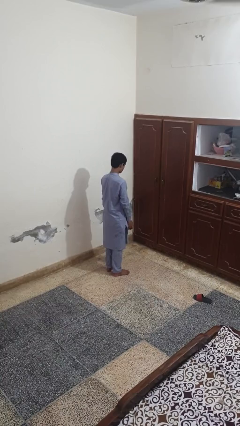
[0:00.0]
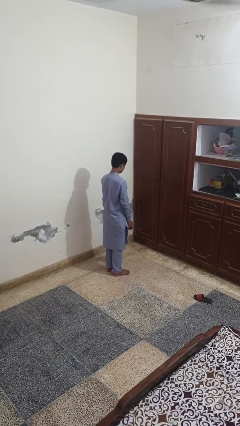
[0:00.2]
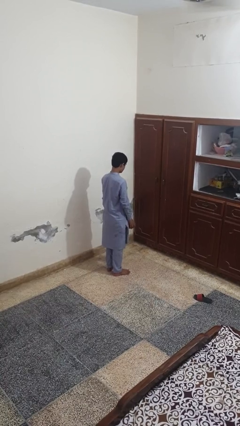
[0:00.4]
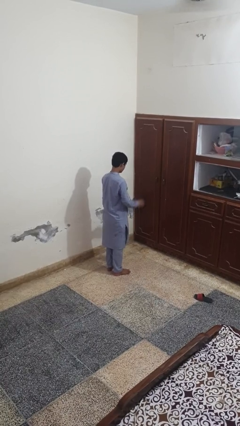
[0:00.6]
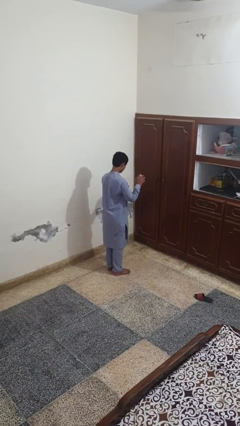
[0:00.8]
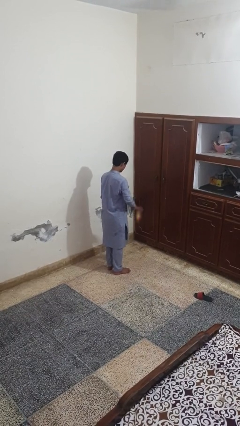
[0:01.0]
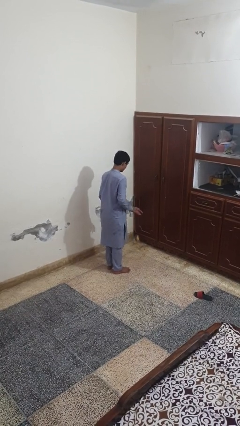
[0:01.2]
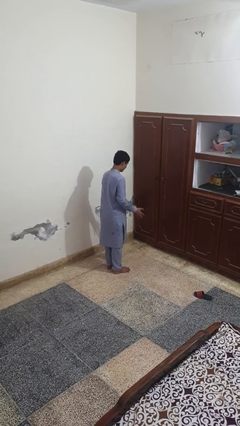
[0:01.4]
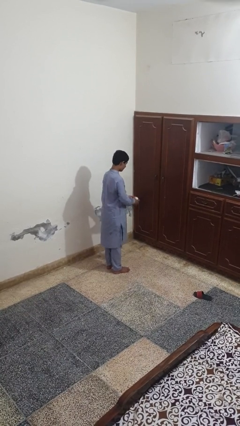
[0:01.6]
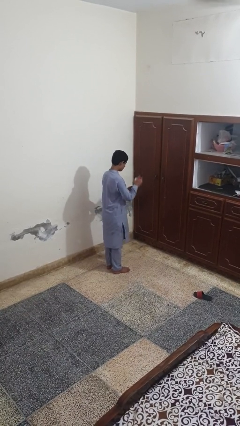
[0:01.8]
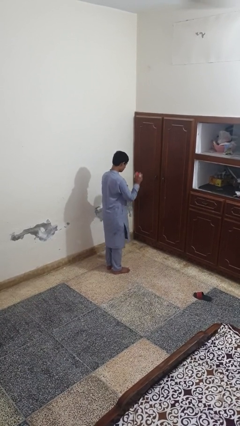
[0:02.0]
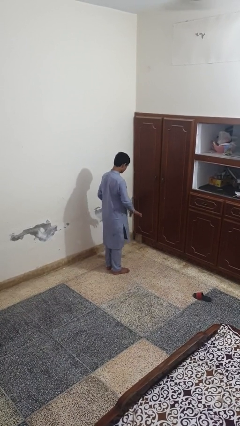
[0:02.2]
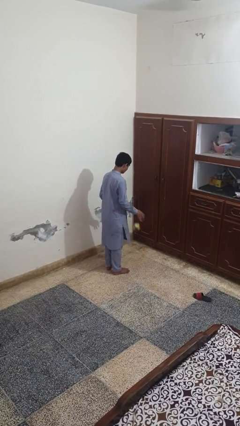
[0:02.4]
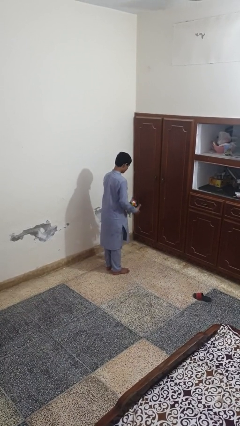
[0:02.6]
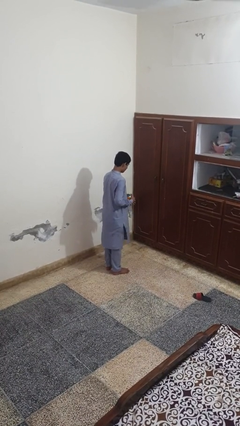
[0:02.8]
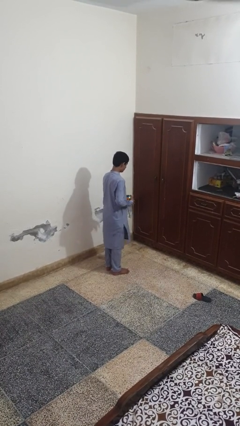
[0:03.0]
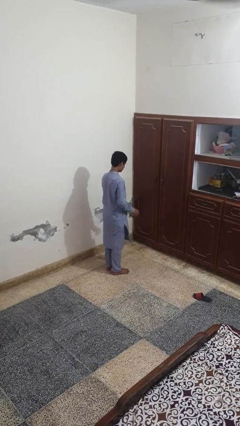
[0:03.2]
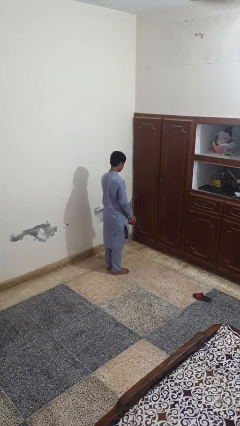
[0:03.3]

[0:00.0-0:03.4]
person bounces ball on floor

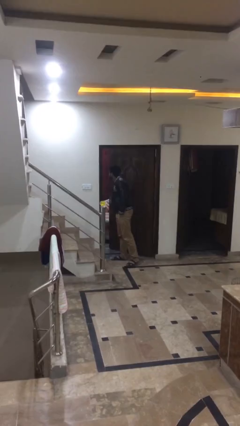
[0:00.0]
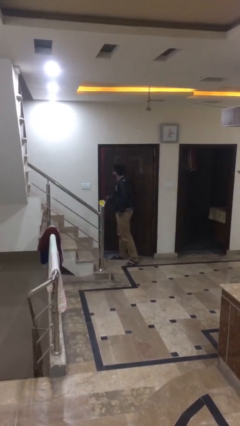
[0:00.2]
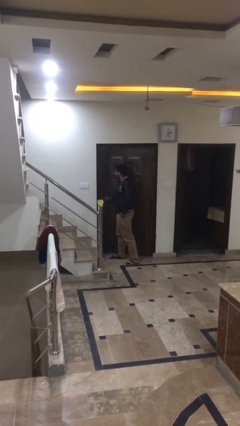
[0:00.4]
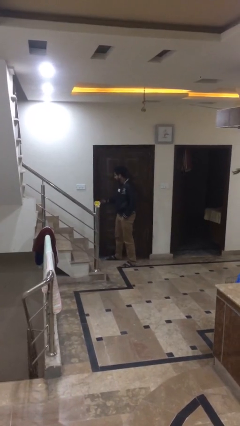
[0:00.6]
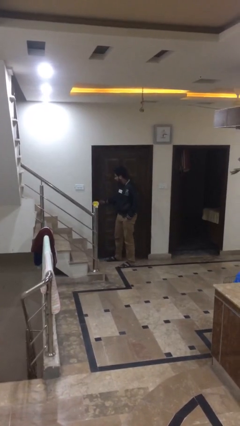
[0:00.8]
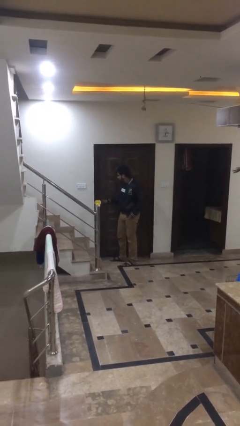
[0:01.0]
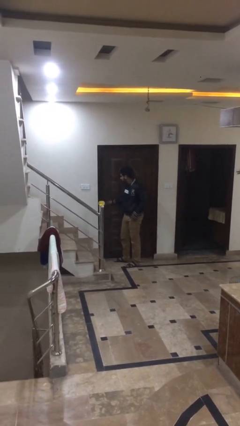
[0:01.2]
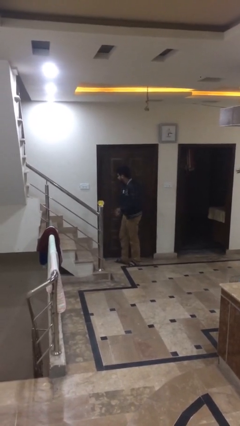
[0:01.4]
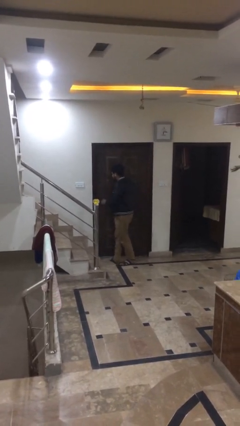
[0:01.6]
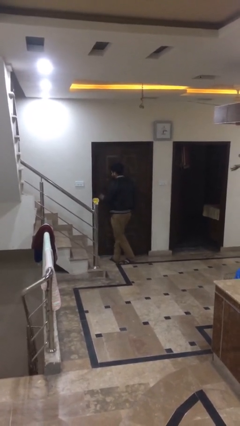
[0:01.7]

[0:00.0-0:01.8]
person closes facility door

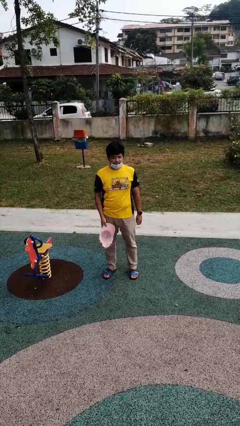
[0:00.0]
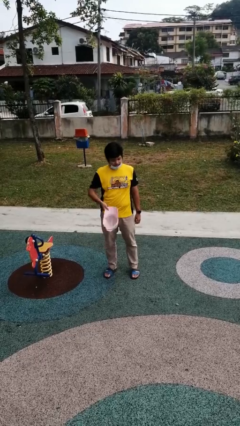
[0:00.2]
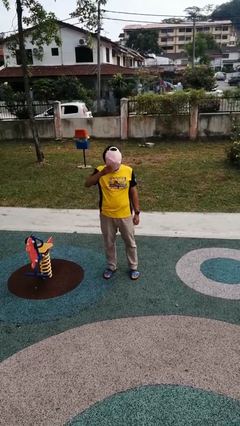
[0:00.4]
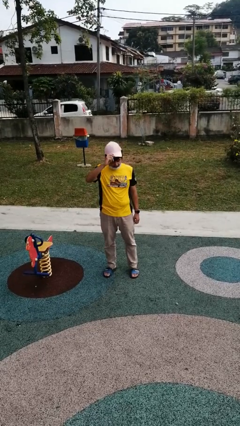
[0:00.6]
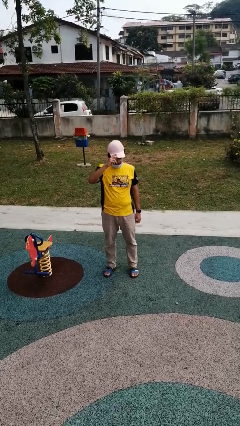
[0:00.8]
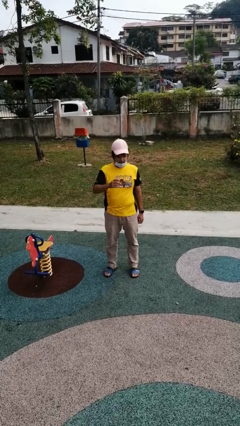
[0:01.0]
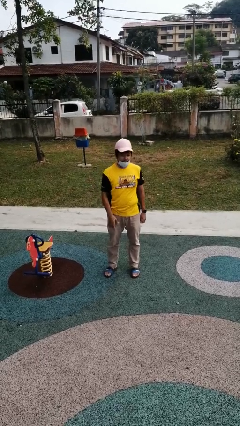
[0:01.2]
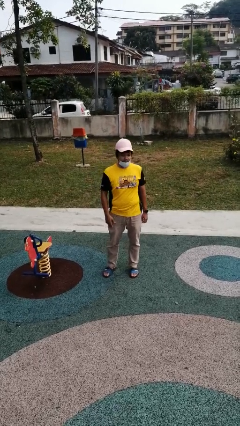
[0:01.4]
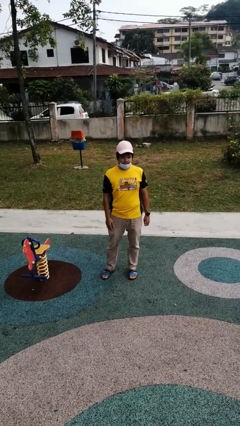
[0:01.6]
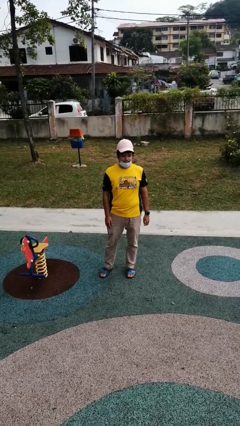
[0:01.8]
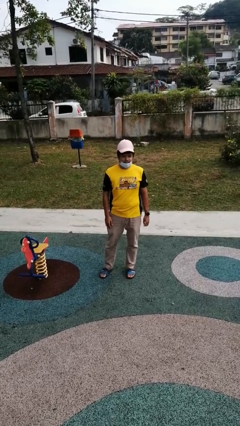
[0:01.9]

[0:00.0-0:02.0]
person puts on hat

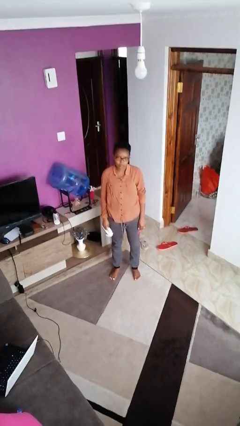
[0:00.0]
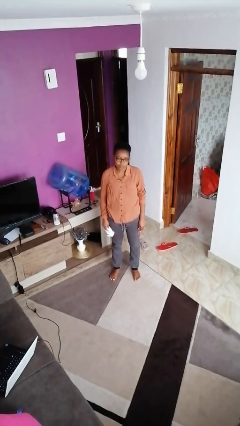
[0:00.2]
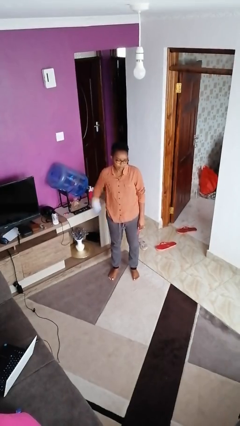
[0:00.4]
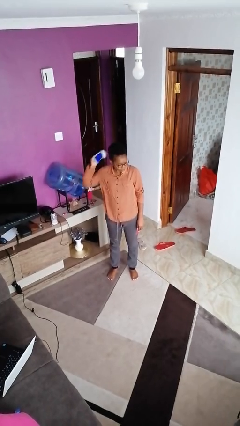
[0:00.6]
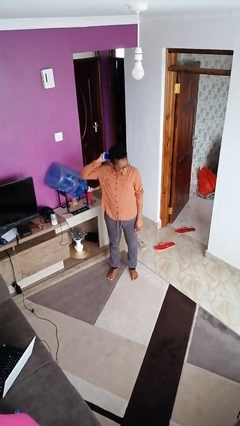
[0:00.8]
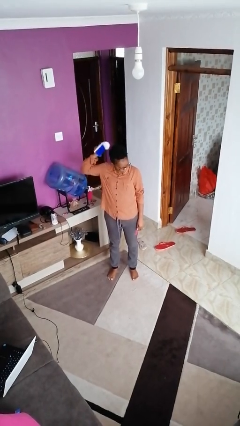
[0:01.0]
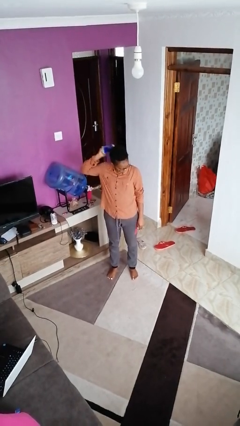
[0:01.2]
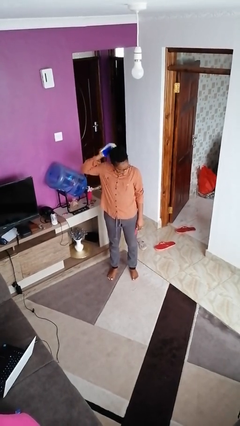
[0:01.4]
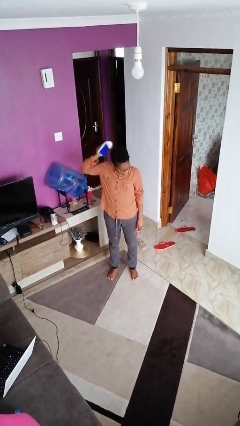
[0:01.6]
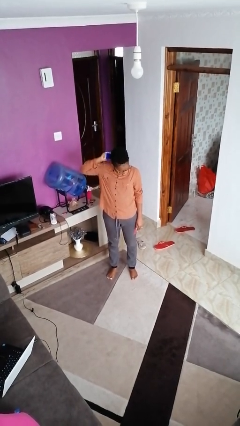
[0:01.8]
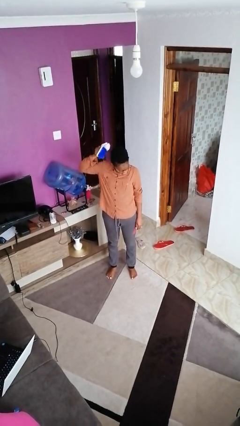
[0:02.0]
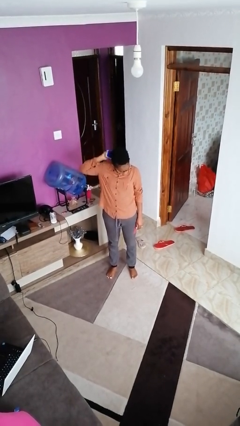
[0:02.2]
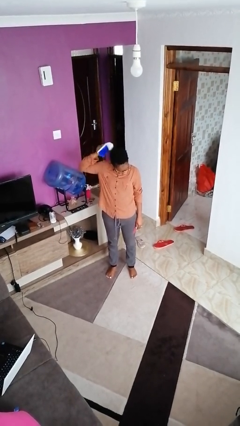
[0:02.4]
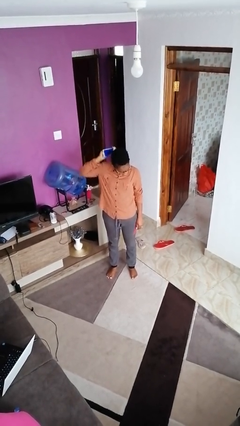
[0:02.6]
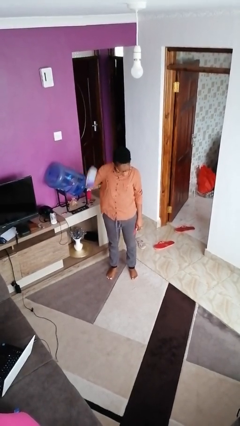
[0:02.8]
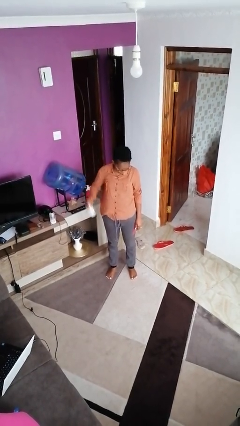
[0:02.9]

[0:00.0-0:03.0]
person brushes hair

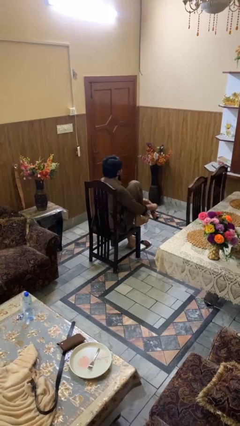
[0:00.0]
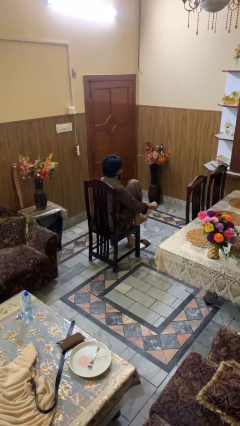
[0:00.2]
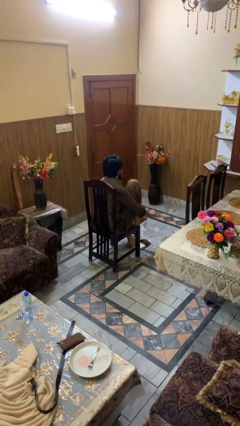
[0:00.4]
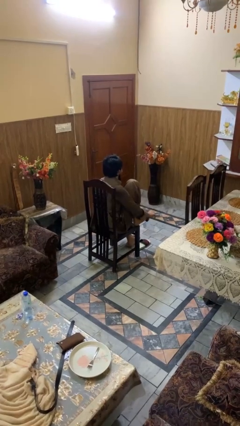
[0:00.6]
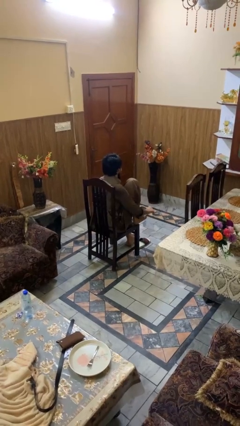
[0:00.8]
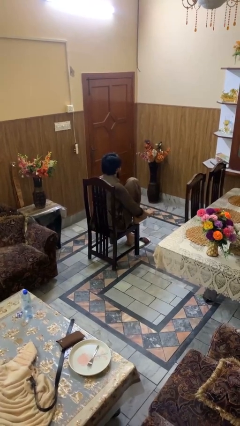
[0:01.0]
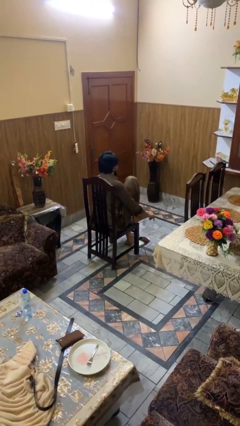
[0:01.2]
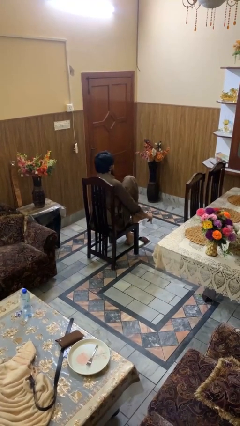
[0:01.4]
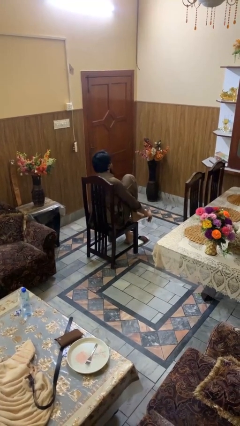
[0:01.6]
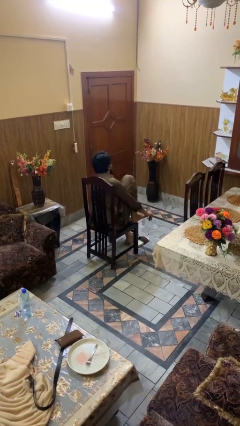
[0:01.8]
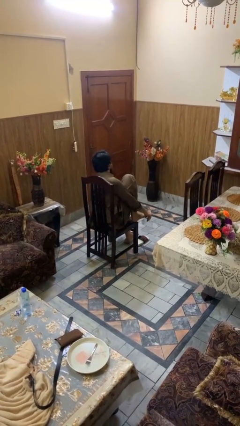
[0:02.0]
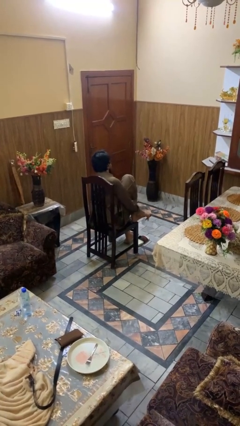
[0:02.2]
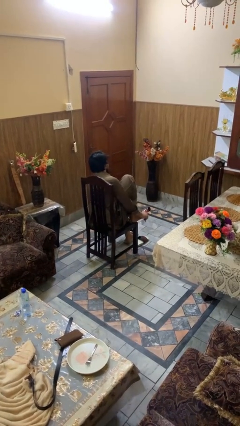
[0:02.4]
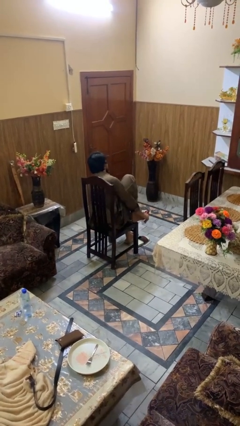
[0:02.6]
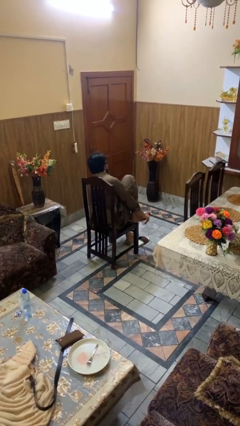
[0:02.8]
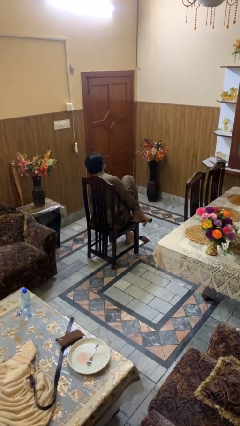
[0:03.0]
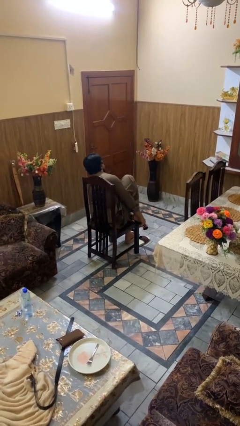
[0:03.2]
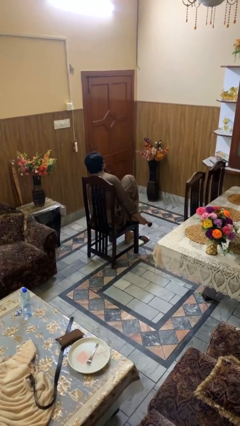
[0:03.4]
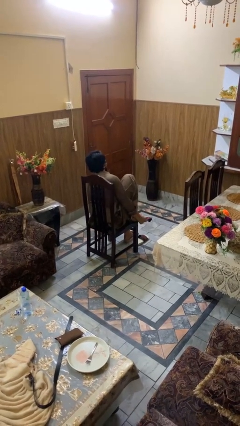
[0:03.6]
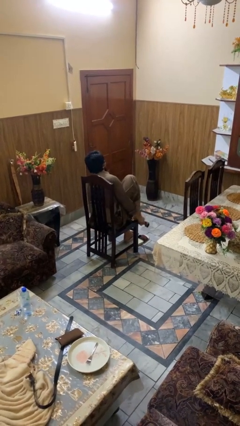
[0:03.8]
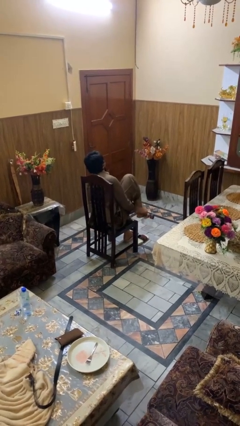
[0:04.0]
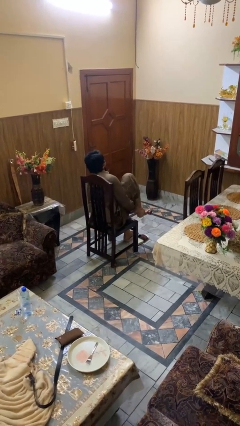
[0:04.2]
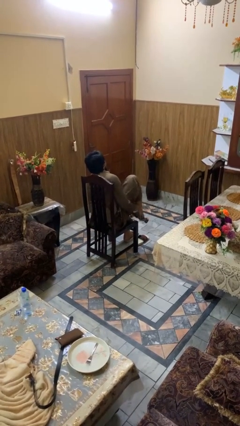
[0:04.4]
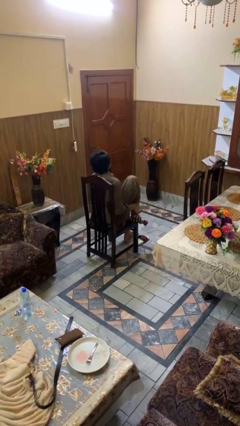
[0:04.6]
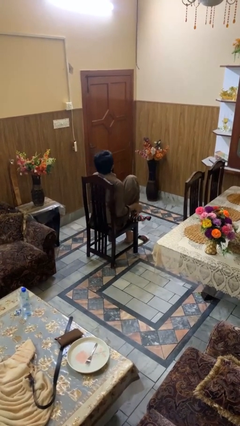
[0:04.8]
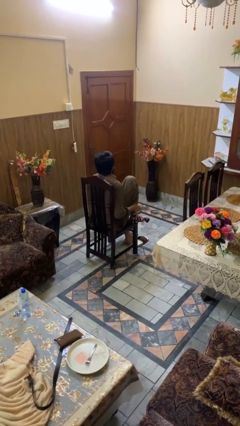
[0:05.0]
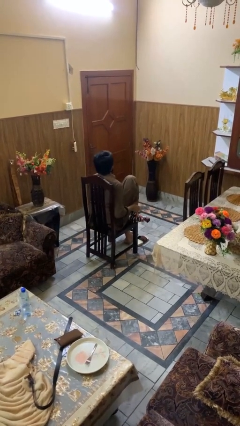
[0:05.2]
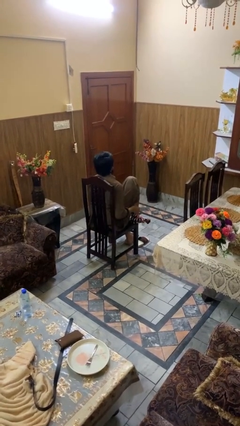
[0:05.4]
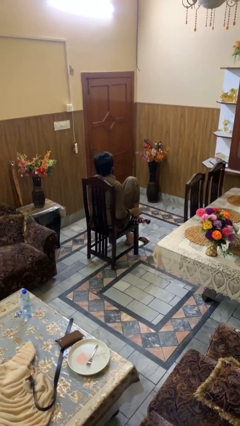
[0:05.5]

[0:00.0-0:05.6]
person puts on socks

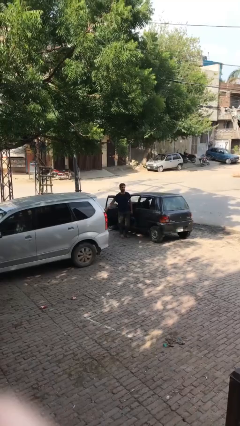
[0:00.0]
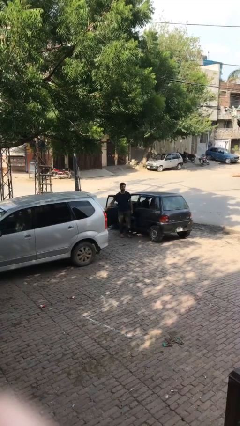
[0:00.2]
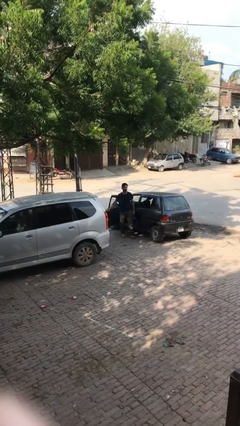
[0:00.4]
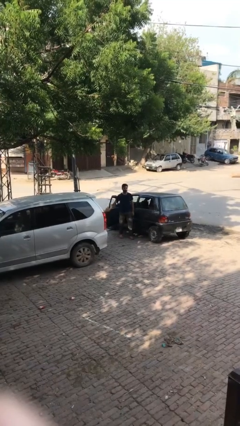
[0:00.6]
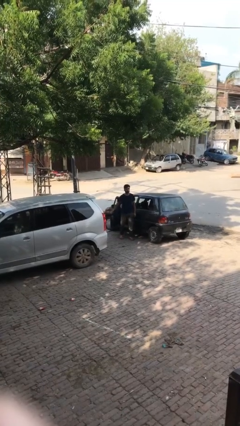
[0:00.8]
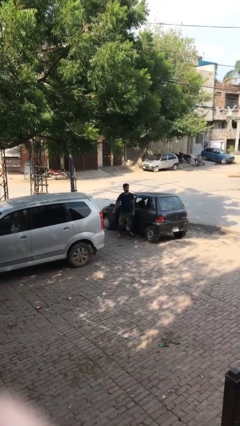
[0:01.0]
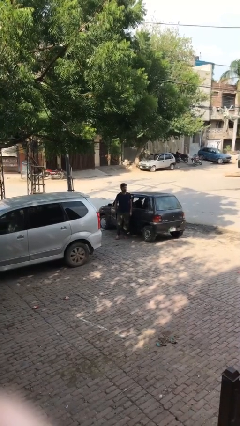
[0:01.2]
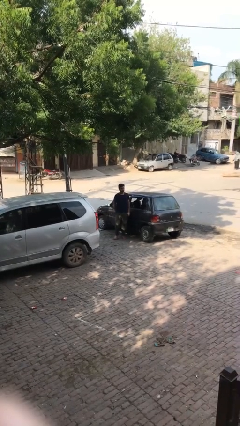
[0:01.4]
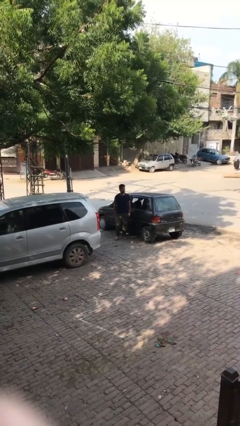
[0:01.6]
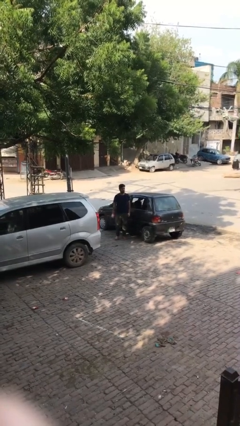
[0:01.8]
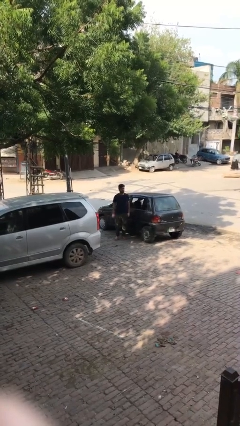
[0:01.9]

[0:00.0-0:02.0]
person closes car door
